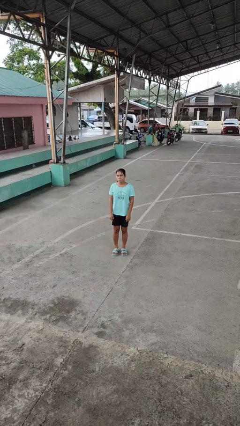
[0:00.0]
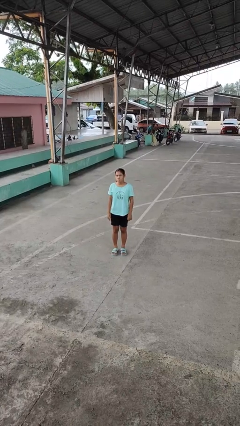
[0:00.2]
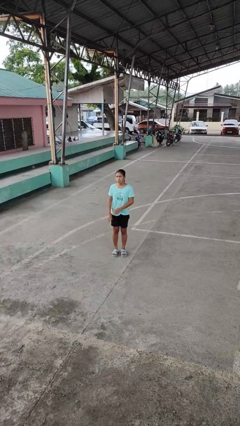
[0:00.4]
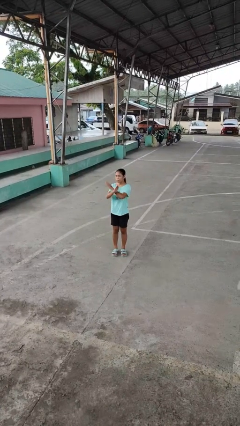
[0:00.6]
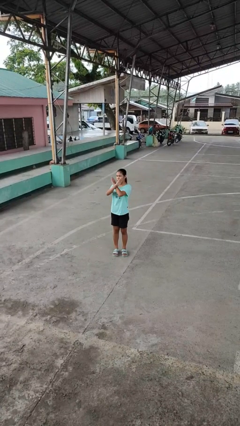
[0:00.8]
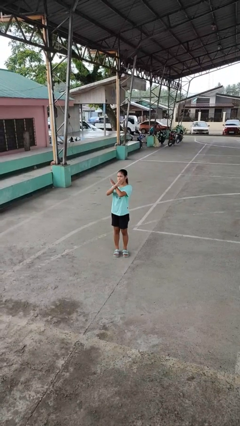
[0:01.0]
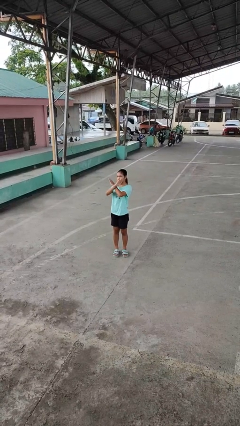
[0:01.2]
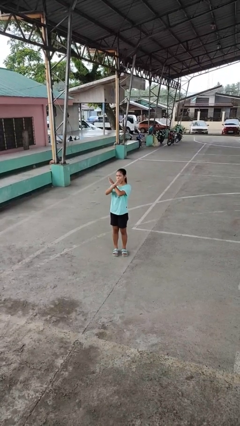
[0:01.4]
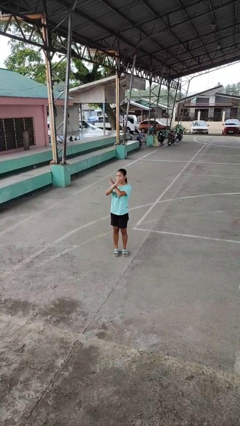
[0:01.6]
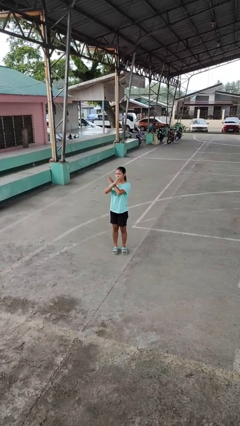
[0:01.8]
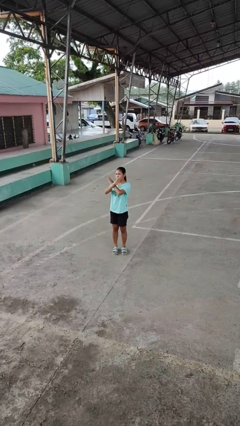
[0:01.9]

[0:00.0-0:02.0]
person gestures arms x

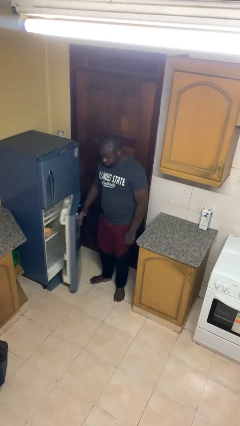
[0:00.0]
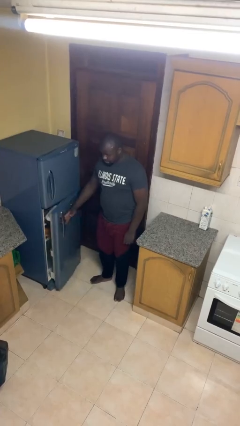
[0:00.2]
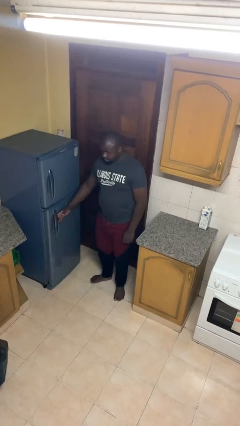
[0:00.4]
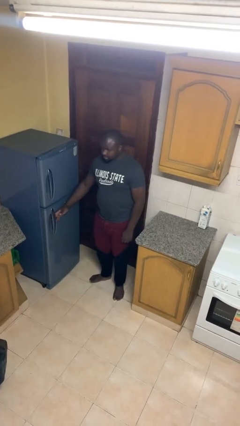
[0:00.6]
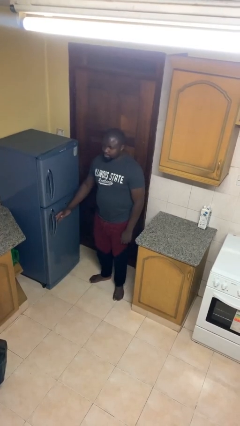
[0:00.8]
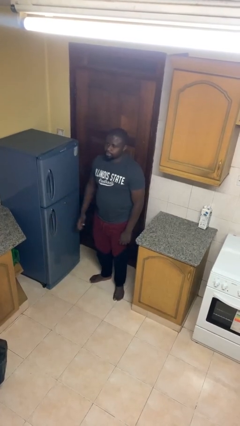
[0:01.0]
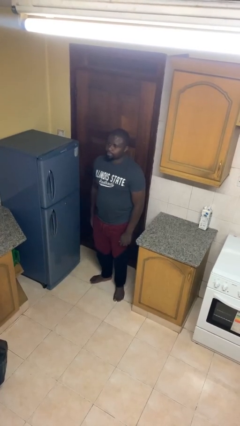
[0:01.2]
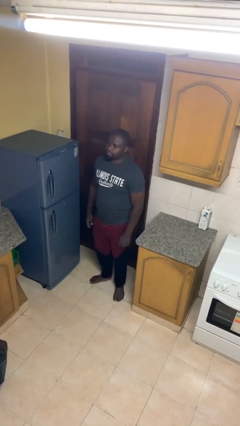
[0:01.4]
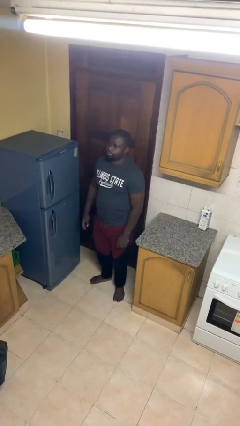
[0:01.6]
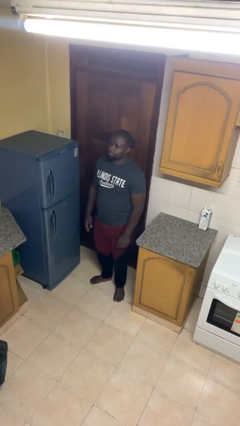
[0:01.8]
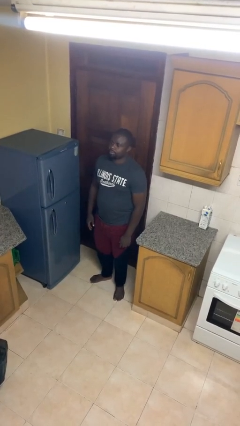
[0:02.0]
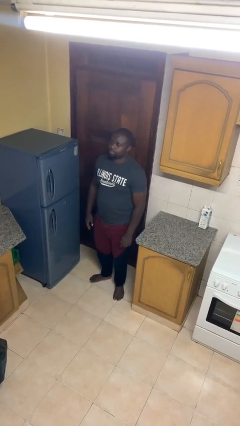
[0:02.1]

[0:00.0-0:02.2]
person closes refrigerator

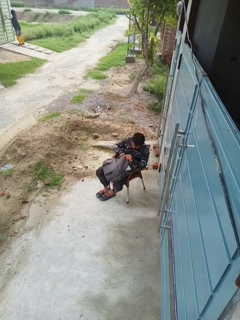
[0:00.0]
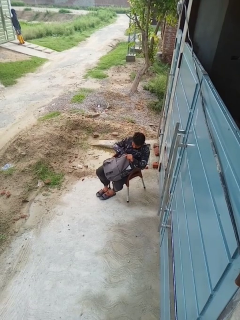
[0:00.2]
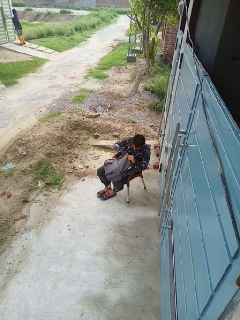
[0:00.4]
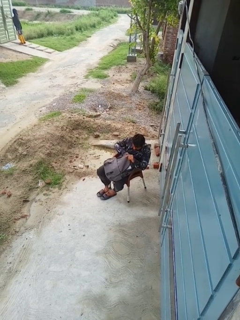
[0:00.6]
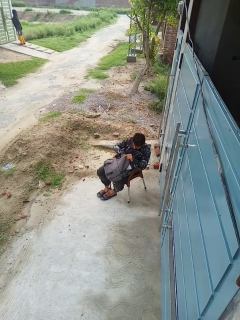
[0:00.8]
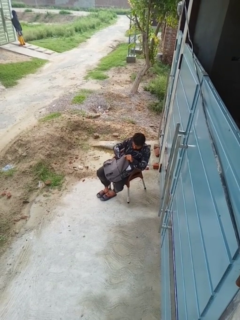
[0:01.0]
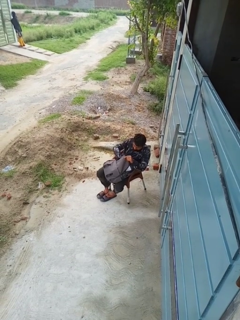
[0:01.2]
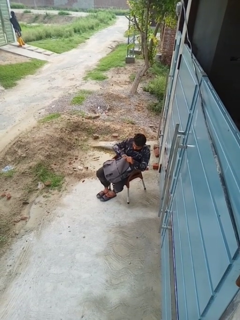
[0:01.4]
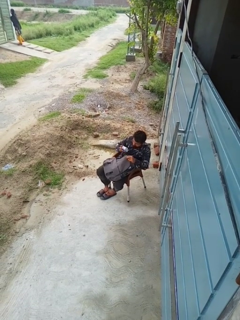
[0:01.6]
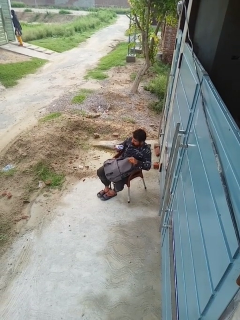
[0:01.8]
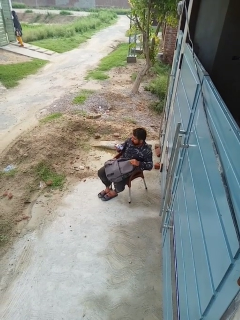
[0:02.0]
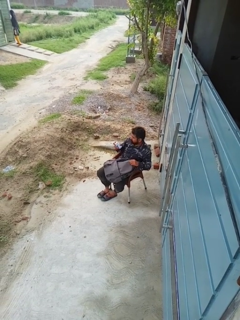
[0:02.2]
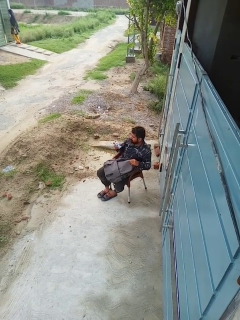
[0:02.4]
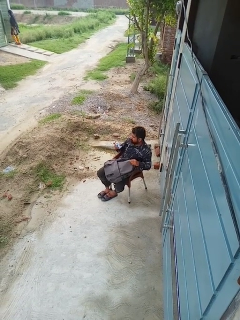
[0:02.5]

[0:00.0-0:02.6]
person takes object from backpack

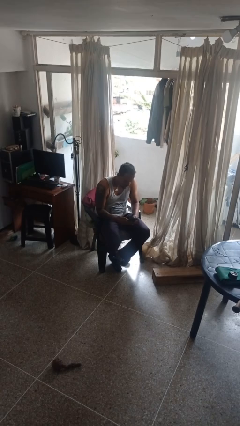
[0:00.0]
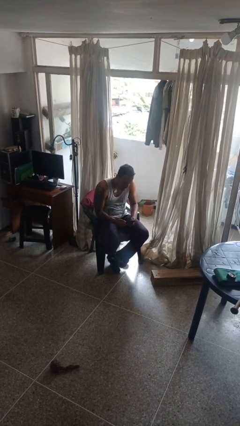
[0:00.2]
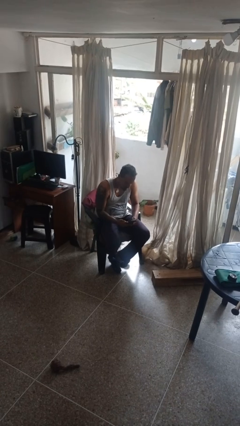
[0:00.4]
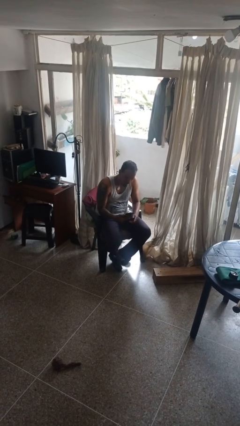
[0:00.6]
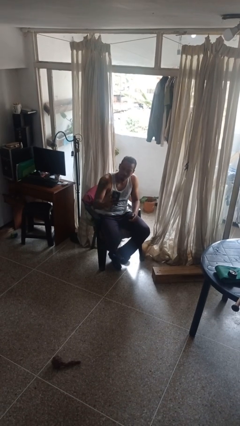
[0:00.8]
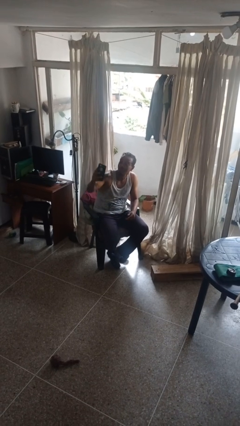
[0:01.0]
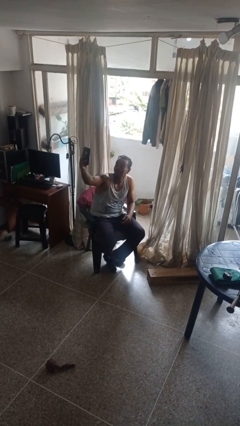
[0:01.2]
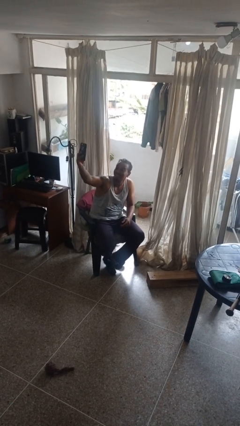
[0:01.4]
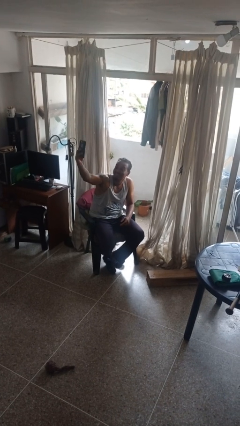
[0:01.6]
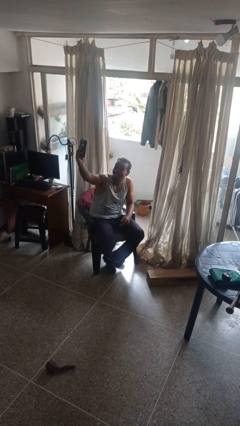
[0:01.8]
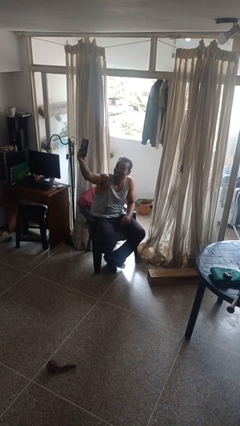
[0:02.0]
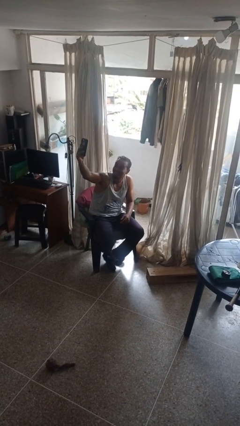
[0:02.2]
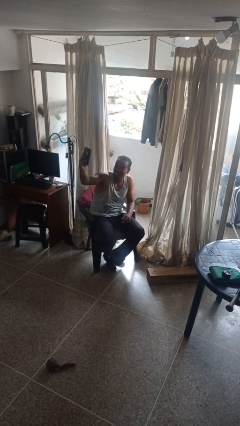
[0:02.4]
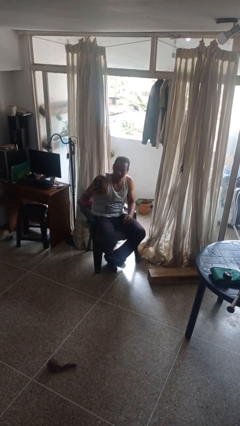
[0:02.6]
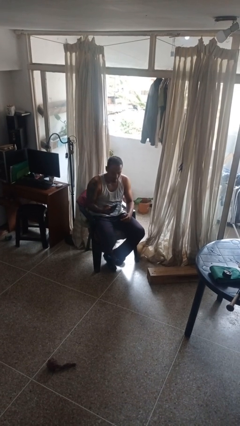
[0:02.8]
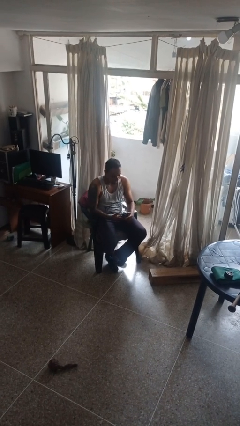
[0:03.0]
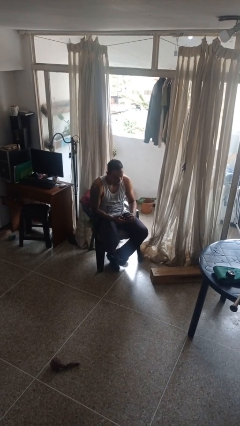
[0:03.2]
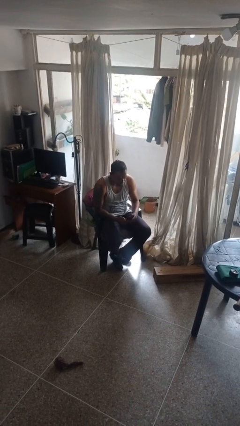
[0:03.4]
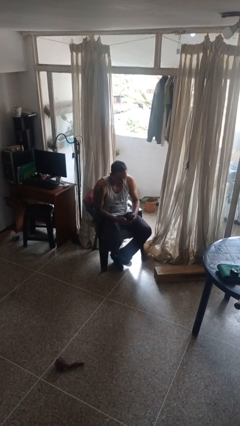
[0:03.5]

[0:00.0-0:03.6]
person takes selfie

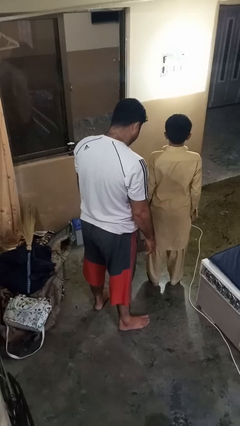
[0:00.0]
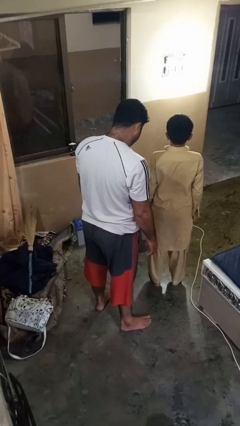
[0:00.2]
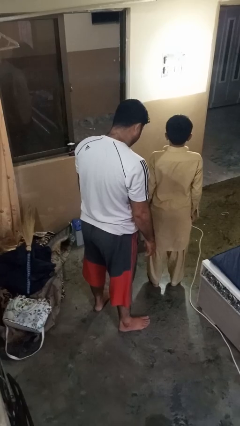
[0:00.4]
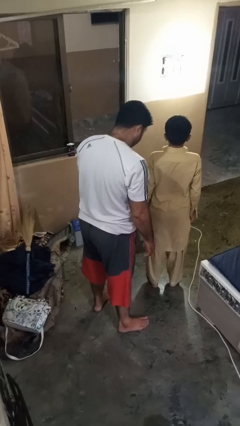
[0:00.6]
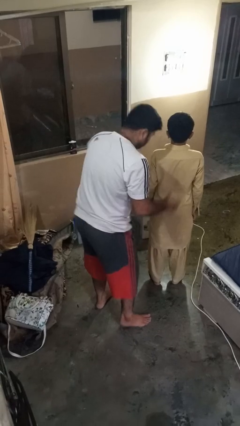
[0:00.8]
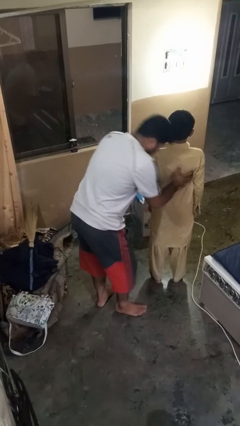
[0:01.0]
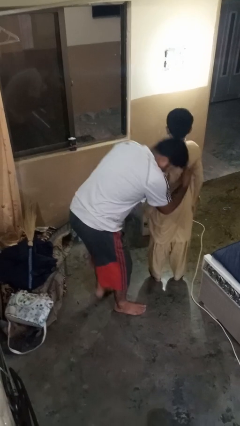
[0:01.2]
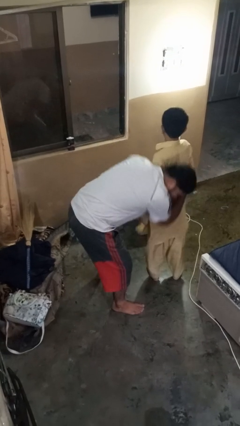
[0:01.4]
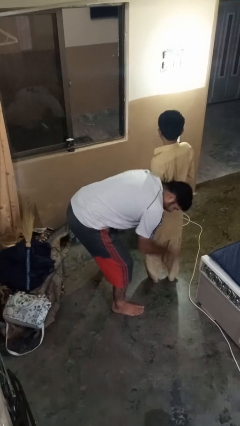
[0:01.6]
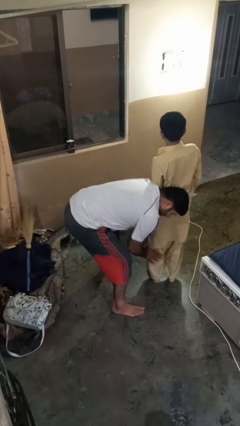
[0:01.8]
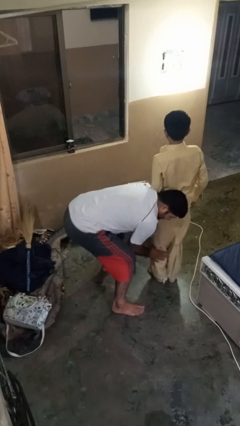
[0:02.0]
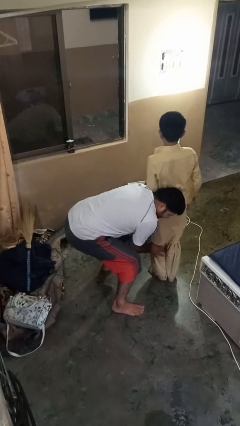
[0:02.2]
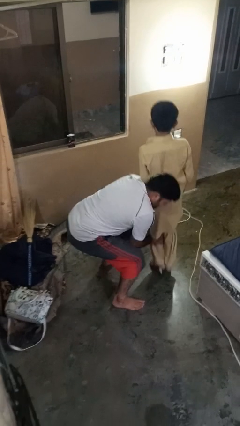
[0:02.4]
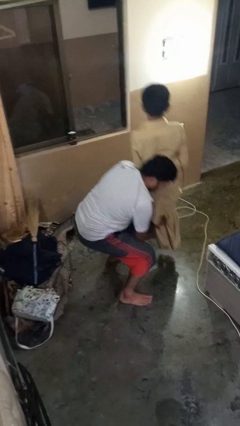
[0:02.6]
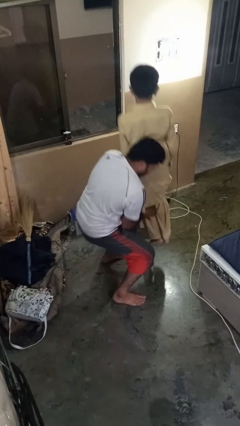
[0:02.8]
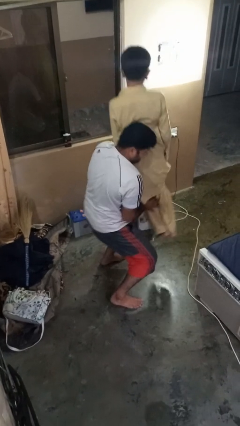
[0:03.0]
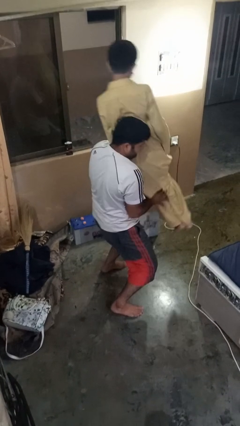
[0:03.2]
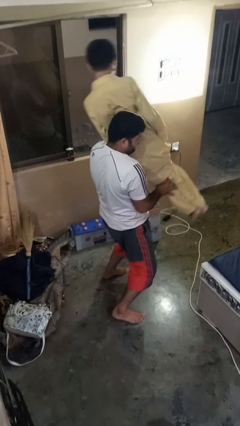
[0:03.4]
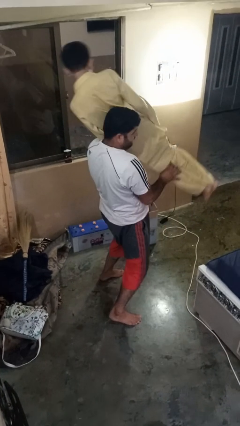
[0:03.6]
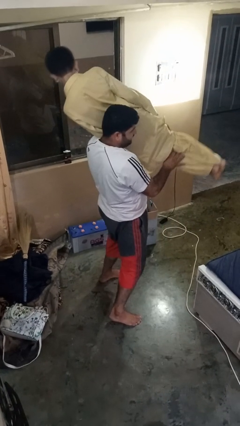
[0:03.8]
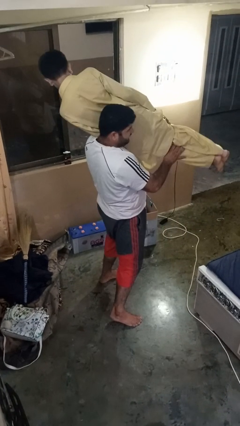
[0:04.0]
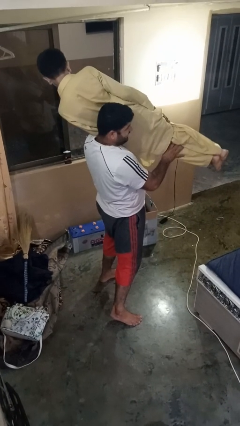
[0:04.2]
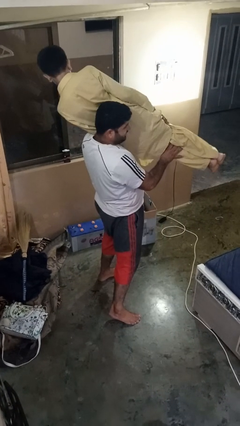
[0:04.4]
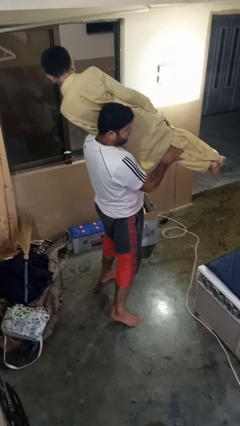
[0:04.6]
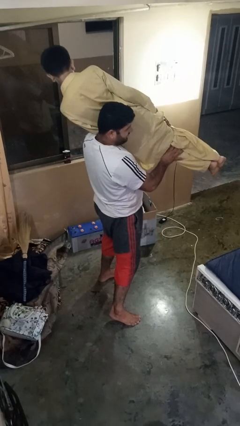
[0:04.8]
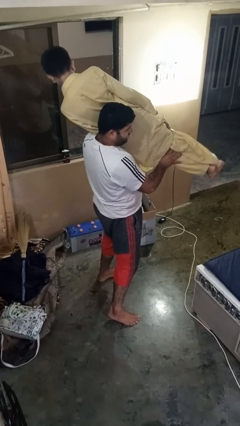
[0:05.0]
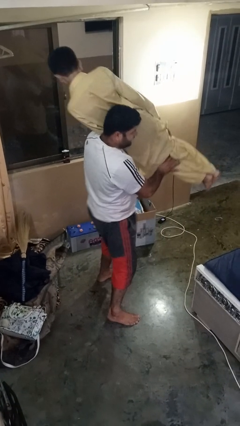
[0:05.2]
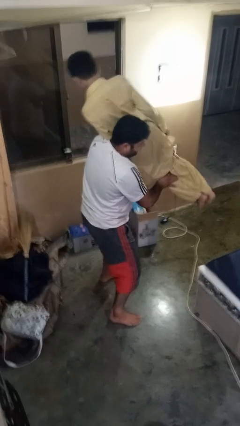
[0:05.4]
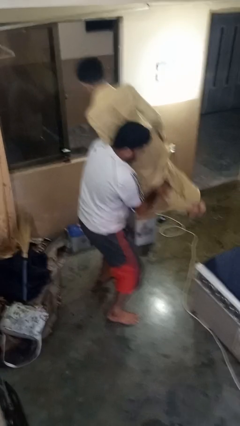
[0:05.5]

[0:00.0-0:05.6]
person carries person over shoulder

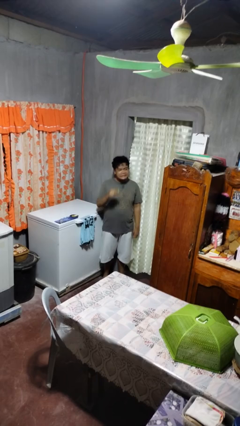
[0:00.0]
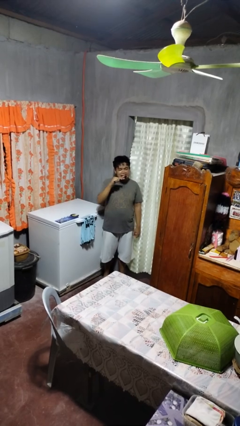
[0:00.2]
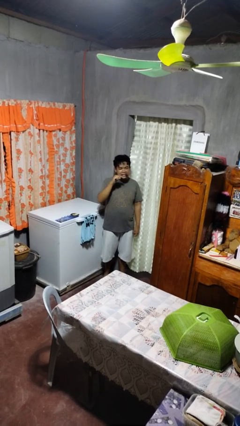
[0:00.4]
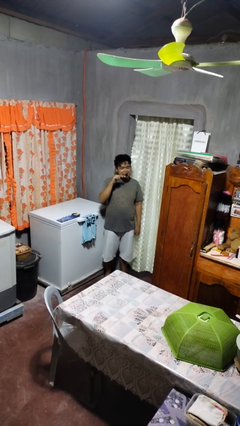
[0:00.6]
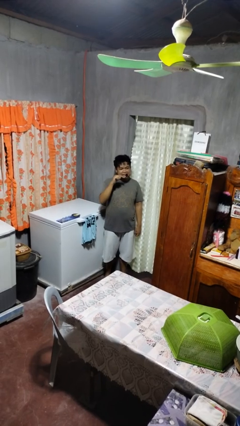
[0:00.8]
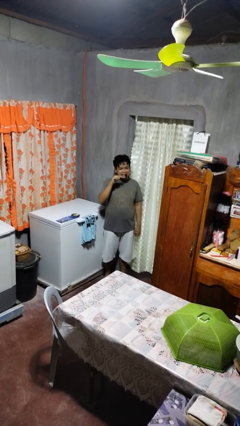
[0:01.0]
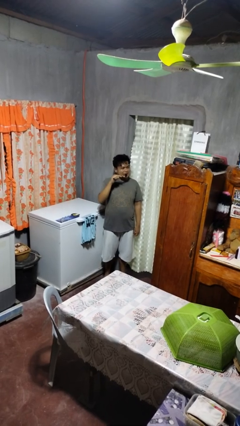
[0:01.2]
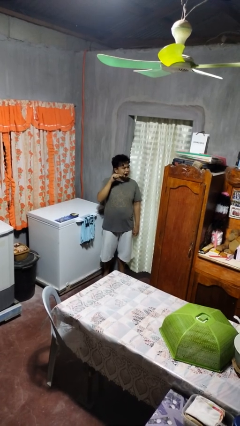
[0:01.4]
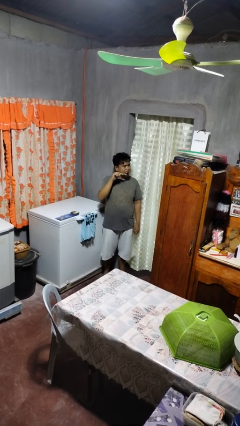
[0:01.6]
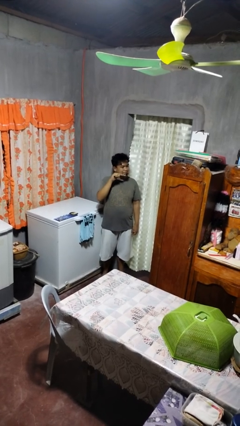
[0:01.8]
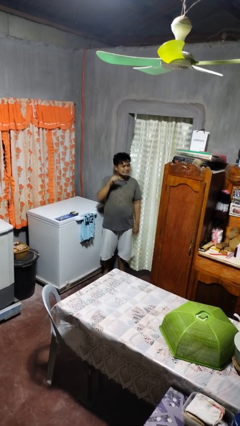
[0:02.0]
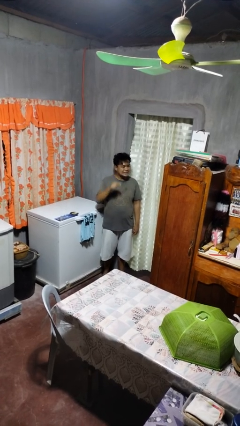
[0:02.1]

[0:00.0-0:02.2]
person brushes teeth
